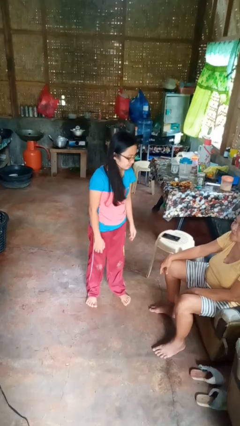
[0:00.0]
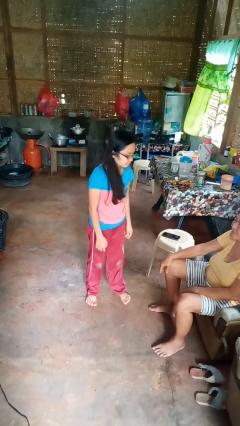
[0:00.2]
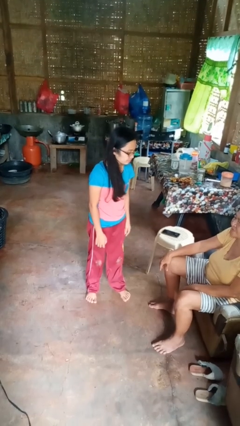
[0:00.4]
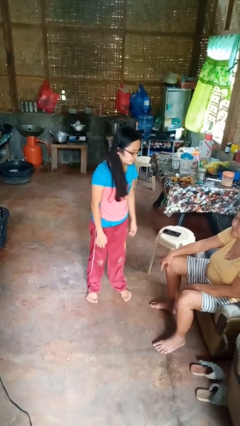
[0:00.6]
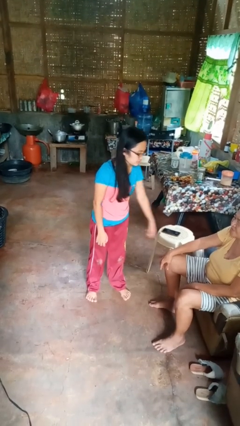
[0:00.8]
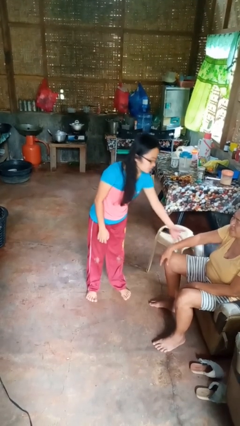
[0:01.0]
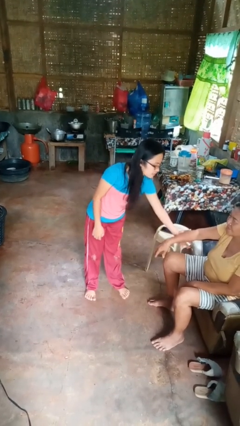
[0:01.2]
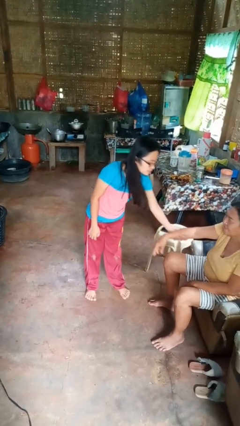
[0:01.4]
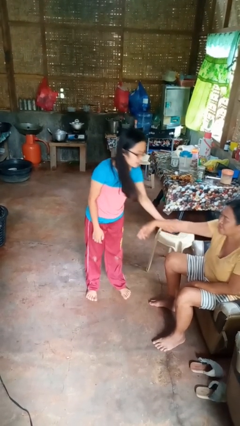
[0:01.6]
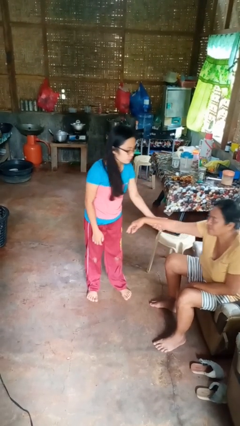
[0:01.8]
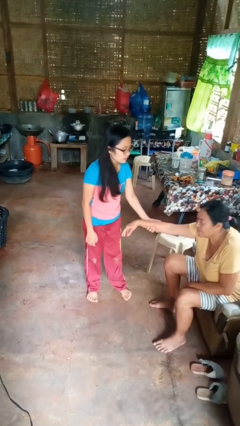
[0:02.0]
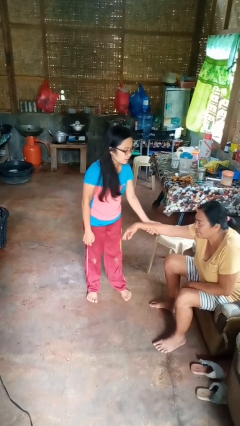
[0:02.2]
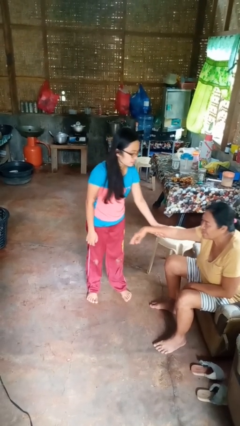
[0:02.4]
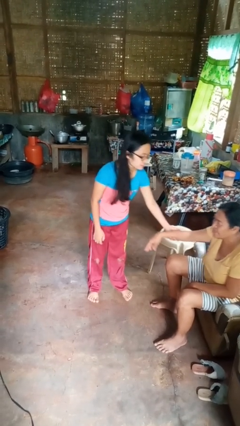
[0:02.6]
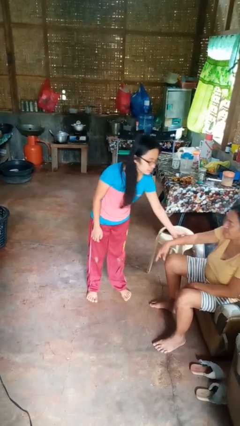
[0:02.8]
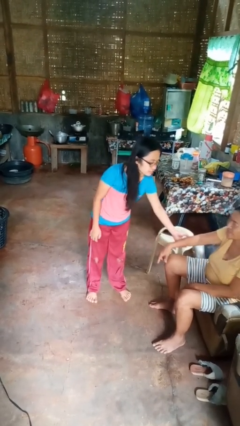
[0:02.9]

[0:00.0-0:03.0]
person grabs person by forearm

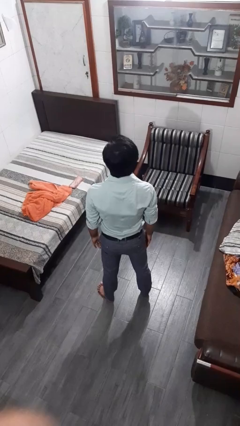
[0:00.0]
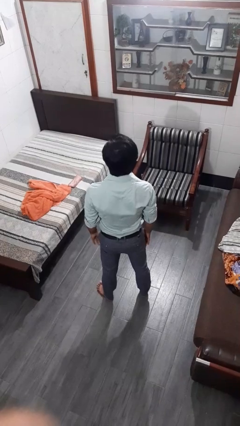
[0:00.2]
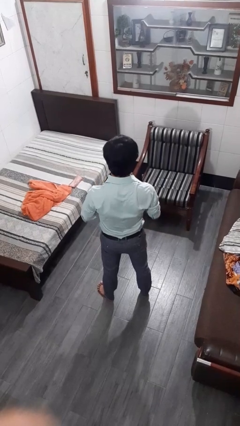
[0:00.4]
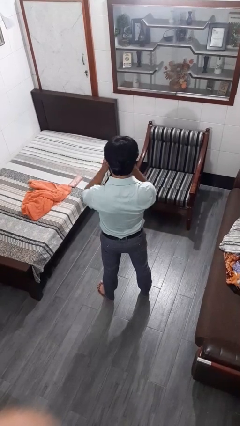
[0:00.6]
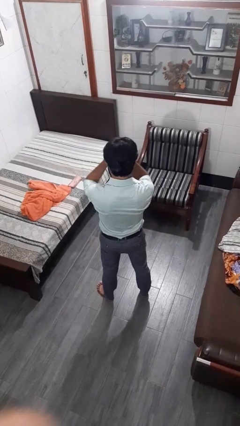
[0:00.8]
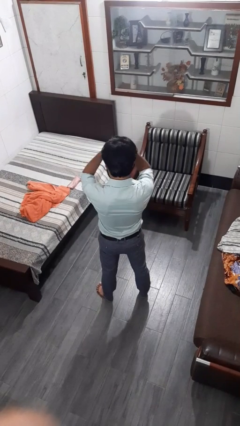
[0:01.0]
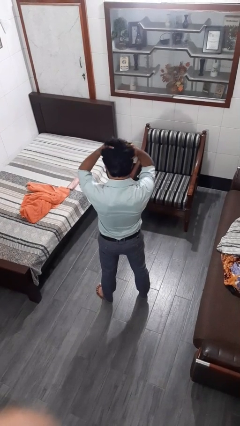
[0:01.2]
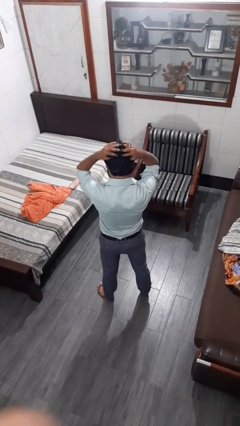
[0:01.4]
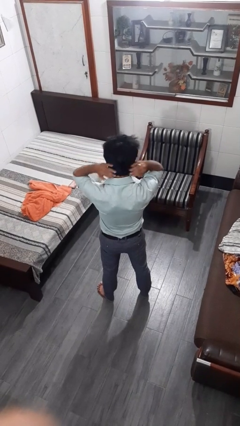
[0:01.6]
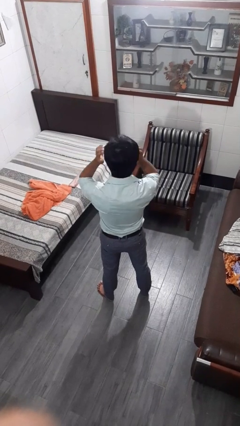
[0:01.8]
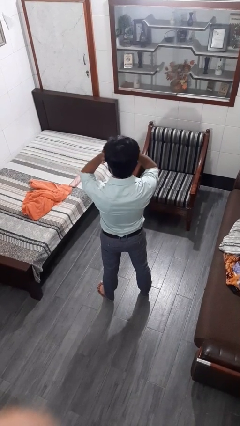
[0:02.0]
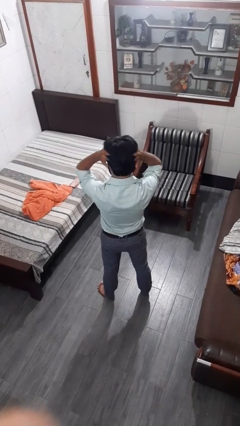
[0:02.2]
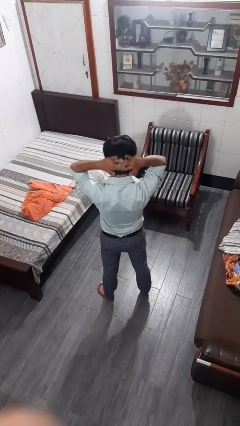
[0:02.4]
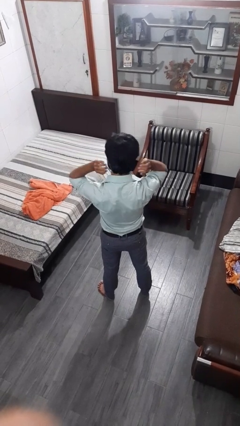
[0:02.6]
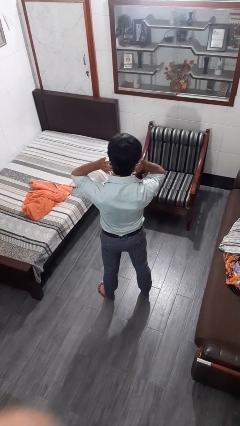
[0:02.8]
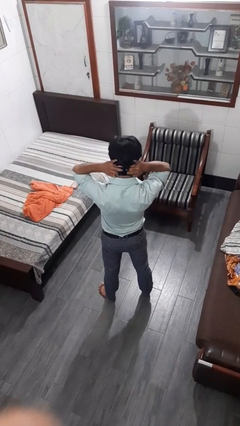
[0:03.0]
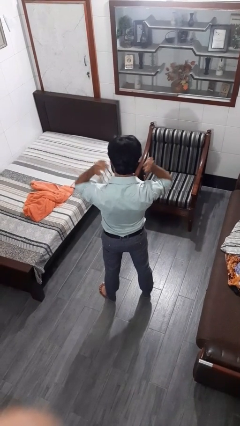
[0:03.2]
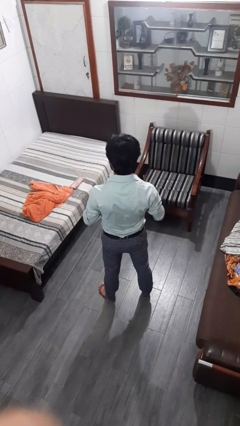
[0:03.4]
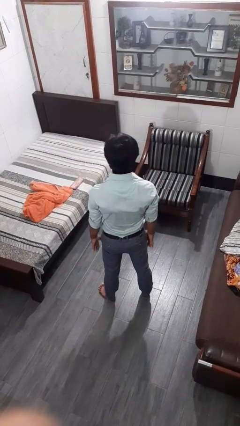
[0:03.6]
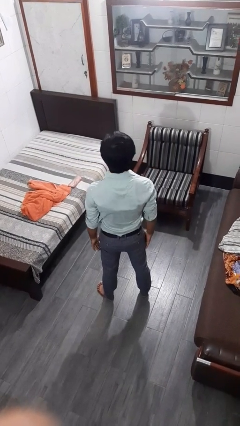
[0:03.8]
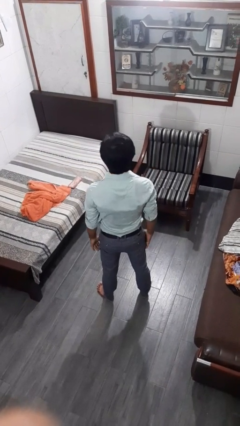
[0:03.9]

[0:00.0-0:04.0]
person strokes hair

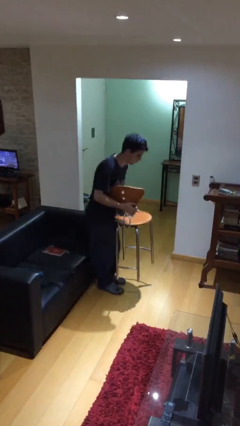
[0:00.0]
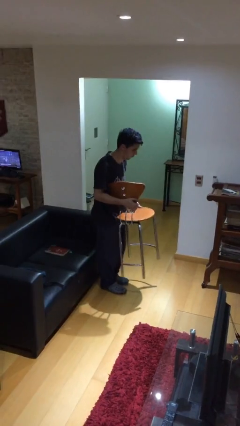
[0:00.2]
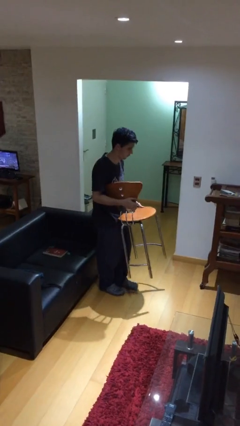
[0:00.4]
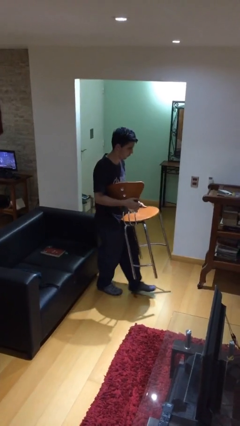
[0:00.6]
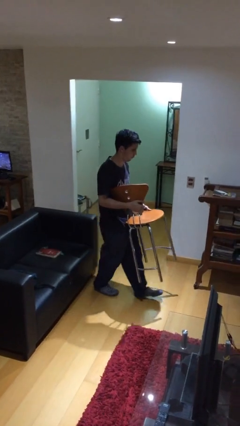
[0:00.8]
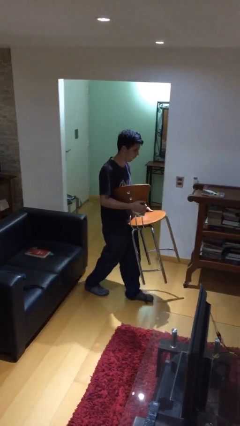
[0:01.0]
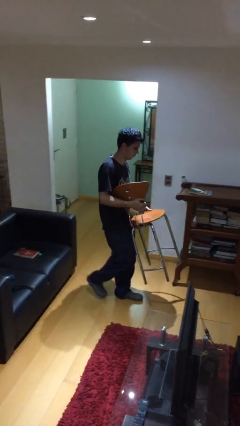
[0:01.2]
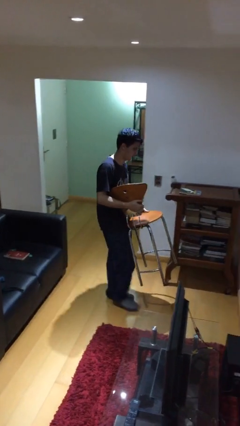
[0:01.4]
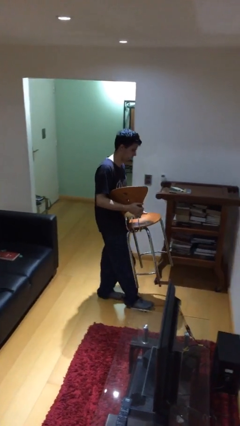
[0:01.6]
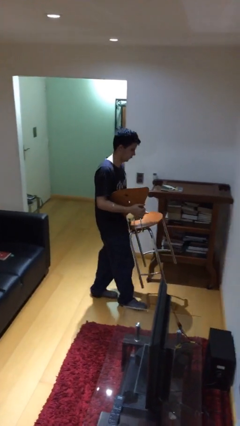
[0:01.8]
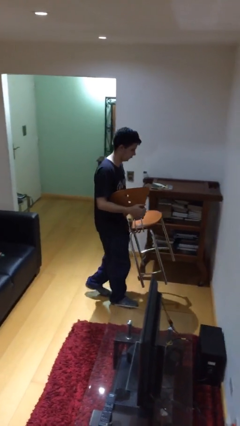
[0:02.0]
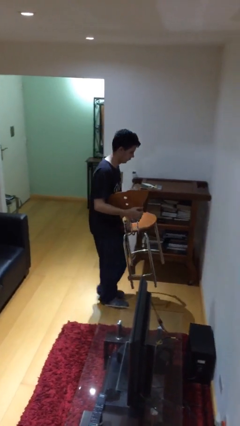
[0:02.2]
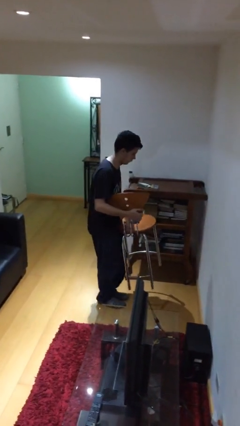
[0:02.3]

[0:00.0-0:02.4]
person carries heavy object

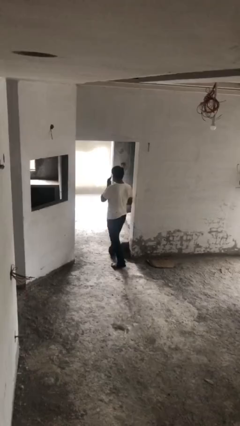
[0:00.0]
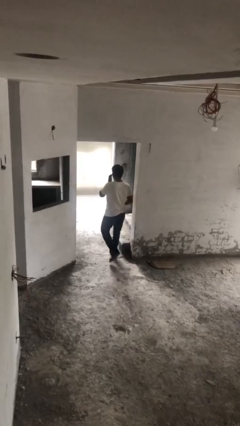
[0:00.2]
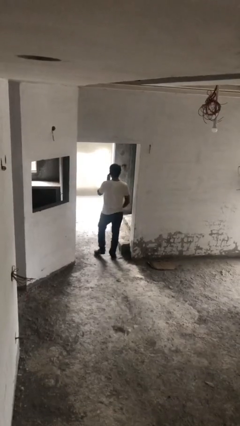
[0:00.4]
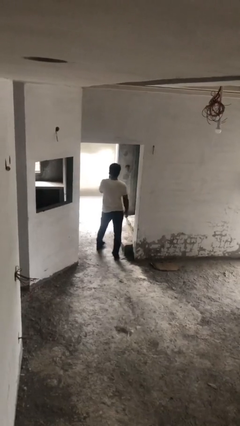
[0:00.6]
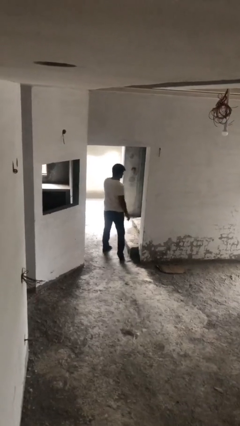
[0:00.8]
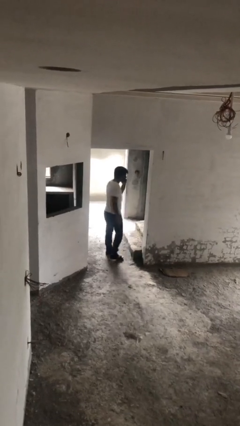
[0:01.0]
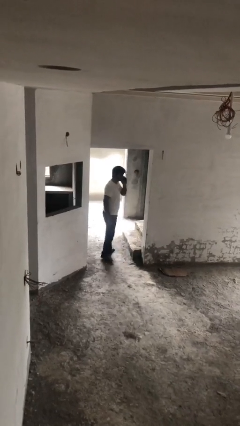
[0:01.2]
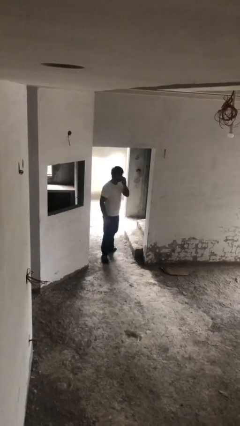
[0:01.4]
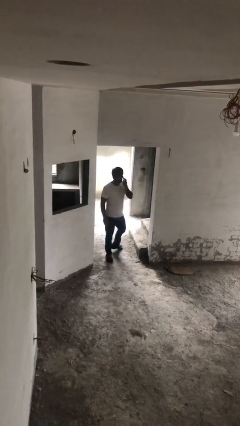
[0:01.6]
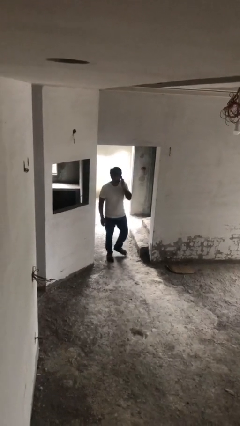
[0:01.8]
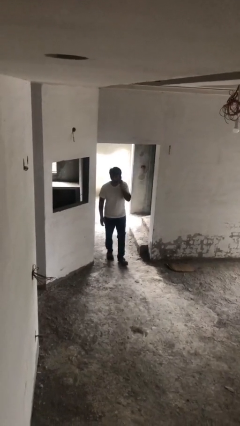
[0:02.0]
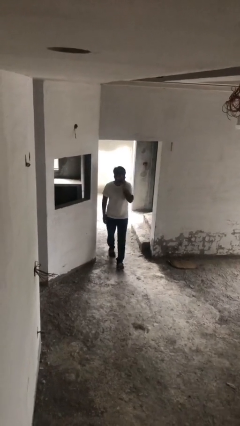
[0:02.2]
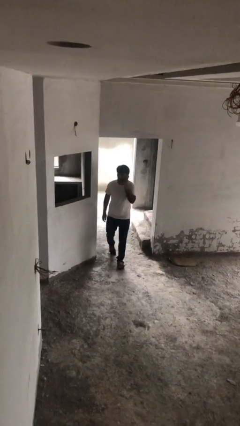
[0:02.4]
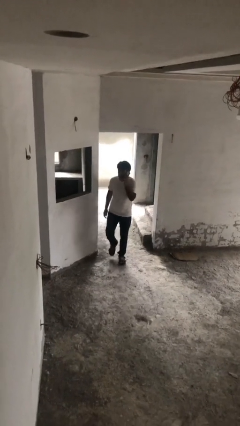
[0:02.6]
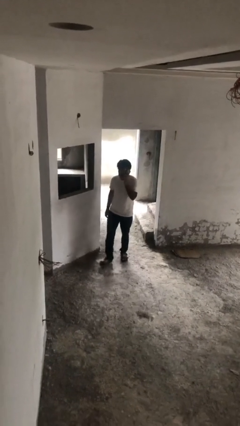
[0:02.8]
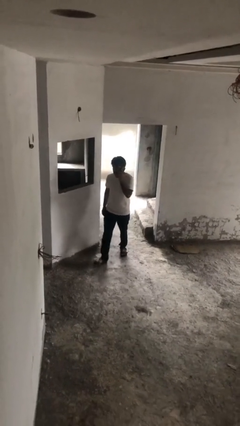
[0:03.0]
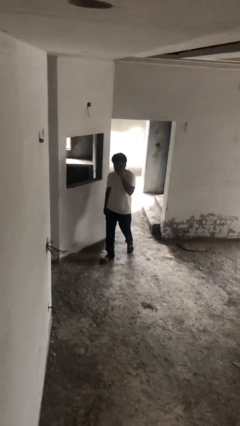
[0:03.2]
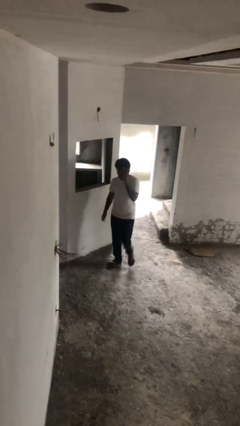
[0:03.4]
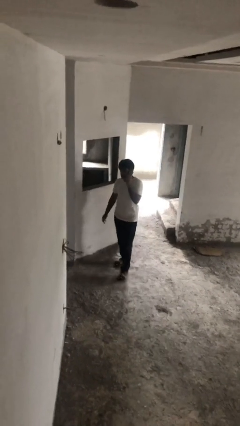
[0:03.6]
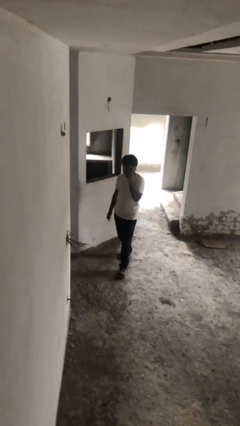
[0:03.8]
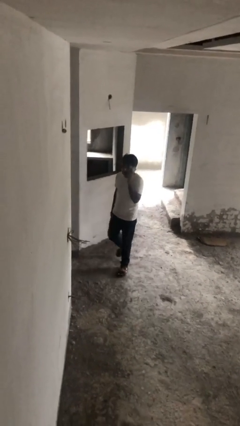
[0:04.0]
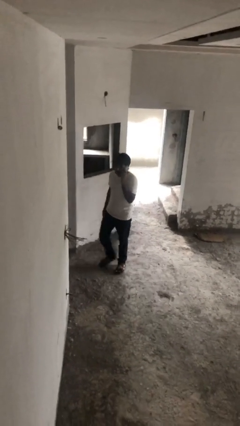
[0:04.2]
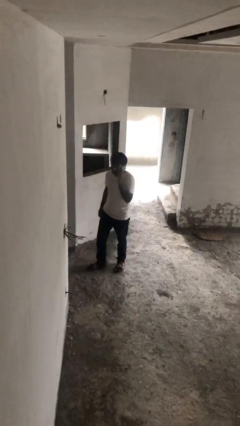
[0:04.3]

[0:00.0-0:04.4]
person talks on phone

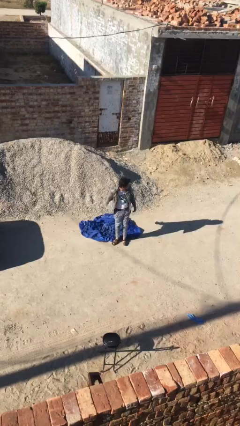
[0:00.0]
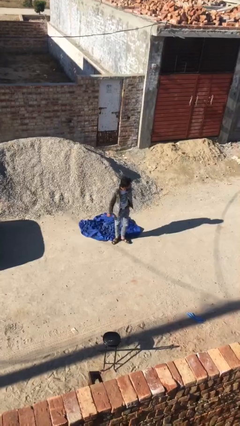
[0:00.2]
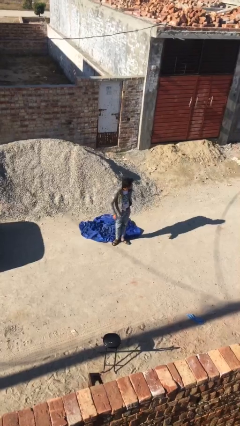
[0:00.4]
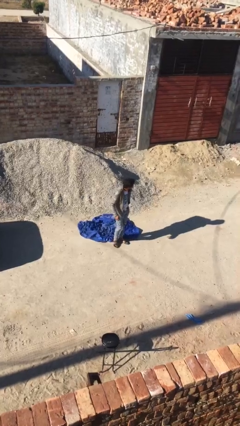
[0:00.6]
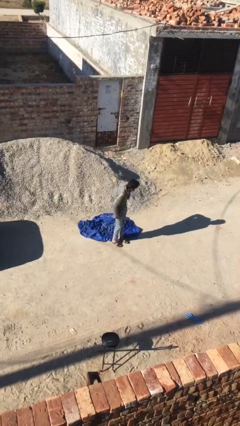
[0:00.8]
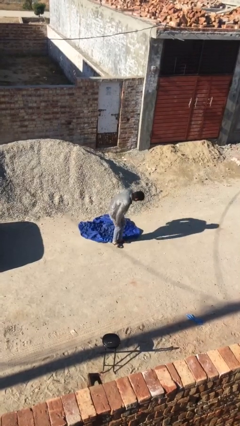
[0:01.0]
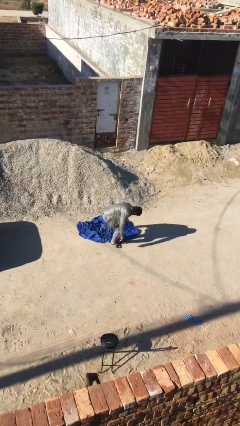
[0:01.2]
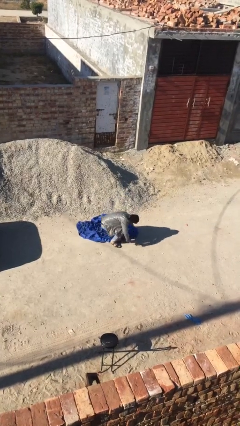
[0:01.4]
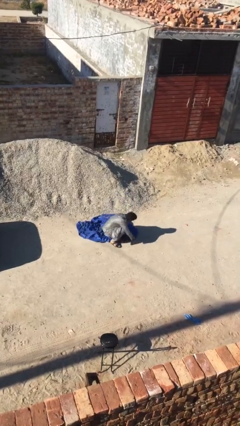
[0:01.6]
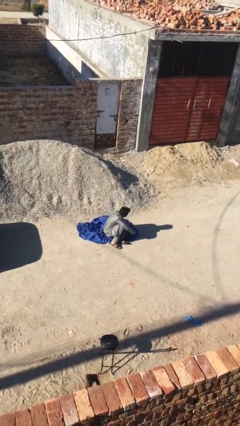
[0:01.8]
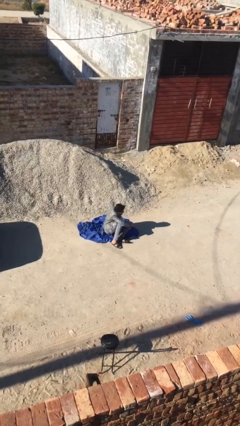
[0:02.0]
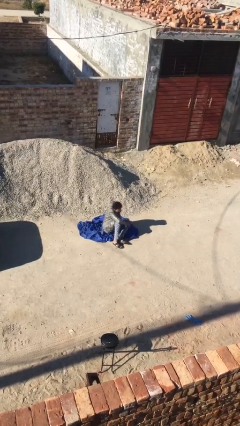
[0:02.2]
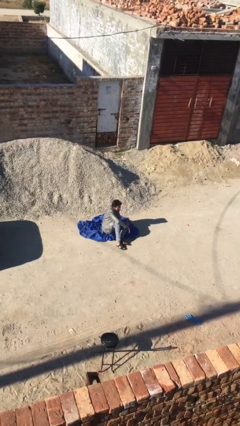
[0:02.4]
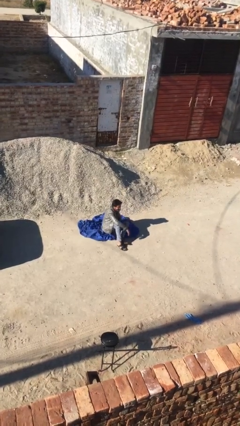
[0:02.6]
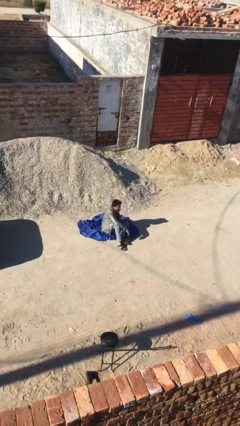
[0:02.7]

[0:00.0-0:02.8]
person sits down

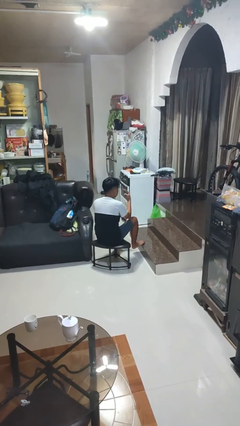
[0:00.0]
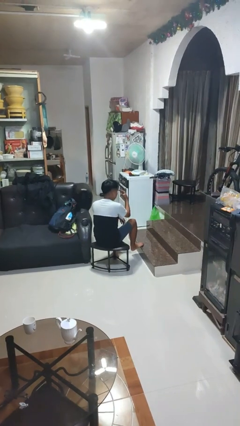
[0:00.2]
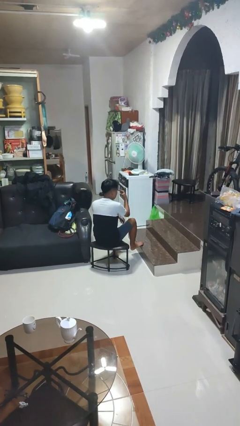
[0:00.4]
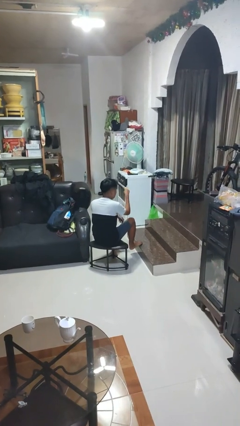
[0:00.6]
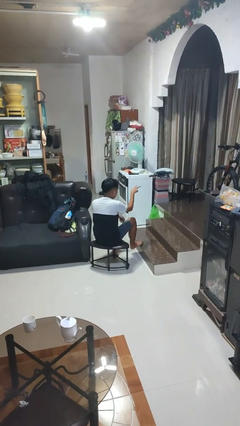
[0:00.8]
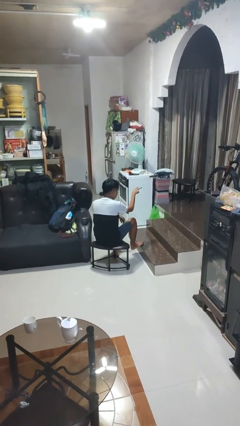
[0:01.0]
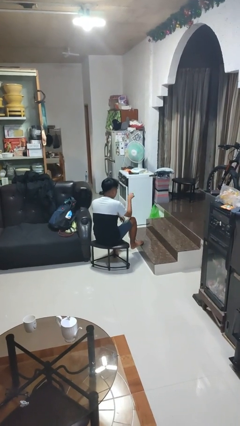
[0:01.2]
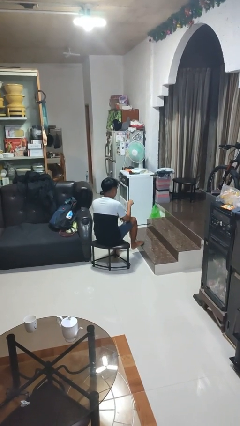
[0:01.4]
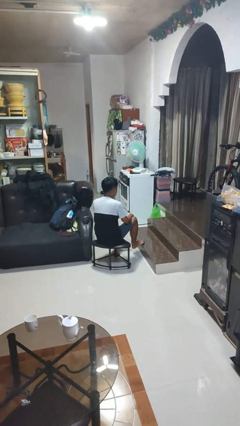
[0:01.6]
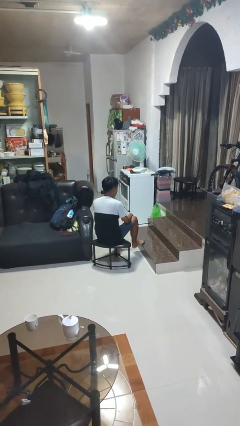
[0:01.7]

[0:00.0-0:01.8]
person gestures watch closely
